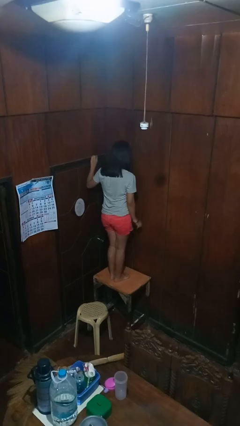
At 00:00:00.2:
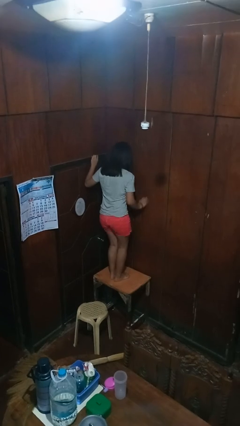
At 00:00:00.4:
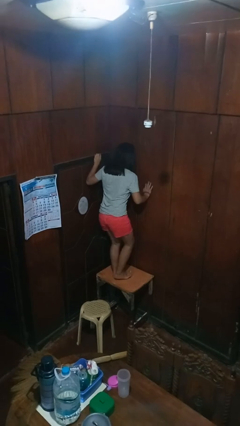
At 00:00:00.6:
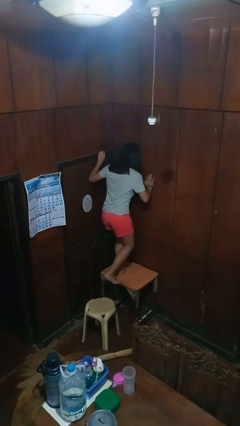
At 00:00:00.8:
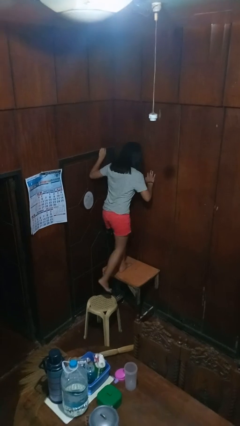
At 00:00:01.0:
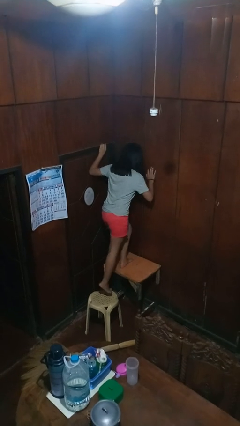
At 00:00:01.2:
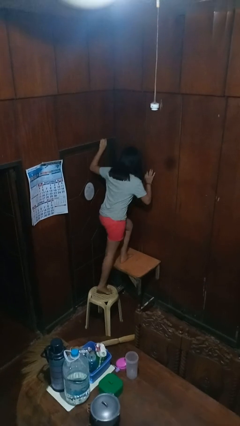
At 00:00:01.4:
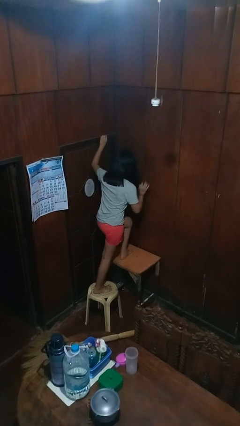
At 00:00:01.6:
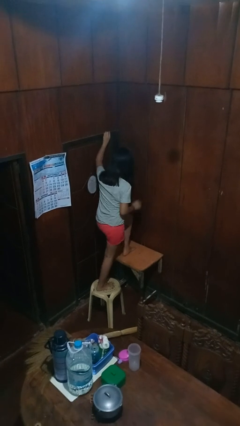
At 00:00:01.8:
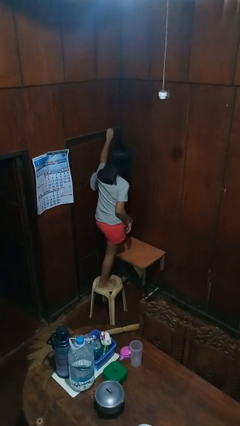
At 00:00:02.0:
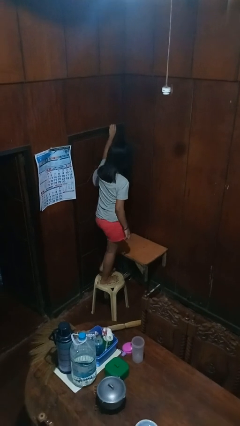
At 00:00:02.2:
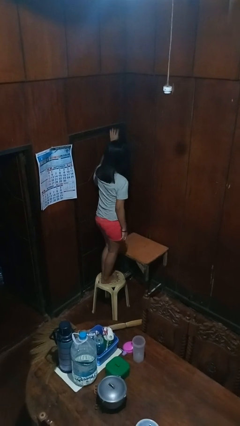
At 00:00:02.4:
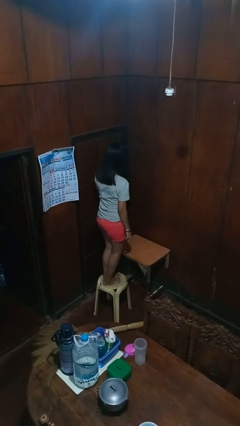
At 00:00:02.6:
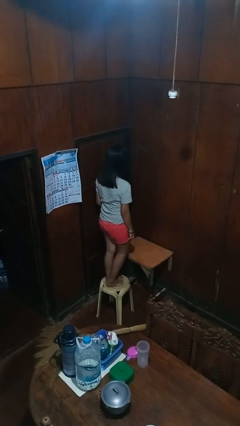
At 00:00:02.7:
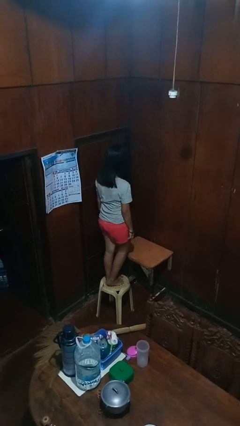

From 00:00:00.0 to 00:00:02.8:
person climbs off table

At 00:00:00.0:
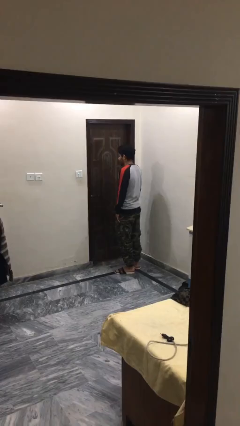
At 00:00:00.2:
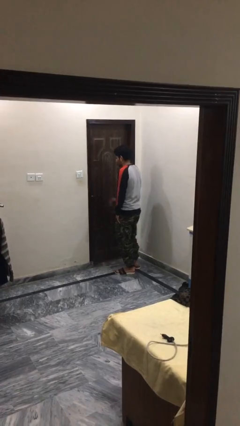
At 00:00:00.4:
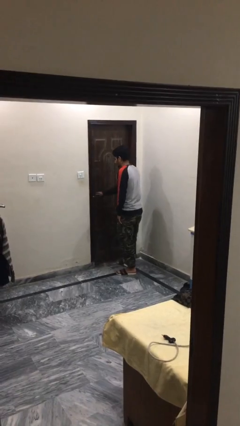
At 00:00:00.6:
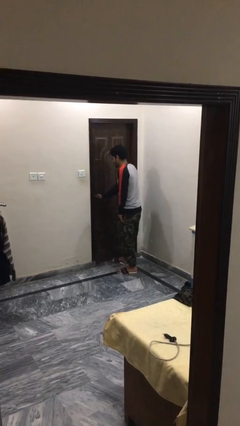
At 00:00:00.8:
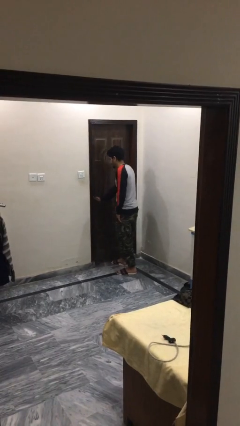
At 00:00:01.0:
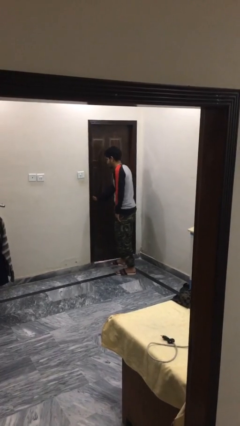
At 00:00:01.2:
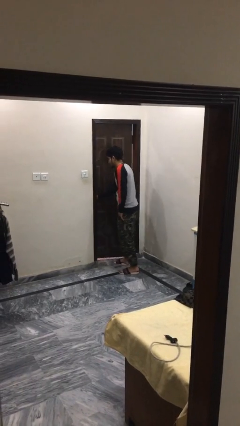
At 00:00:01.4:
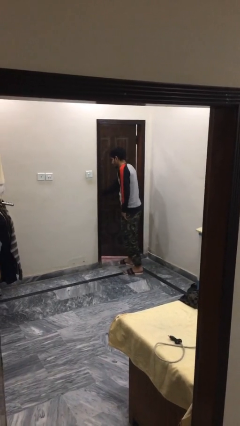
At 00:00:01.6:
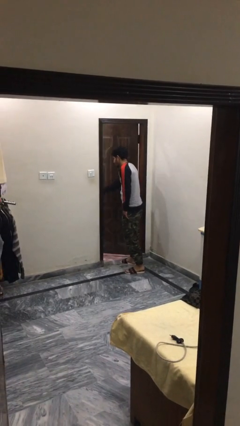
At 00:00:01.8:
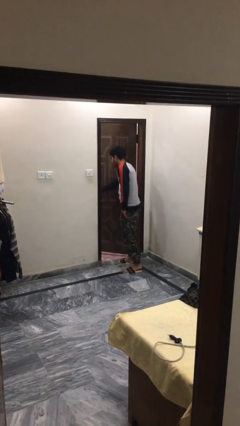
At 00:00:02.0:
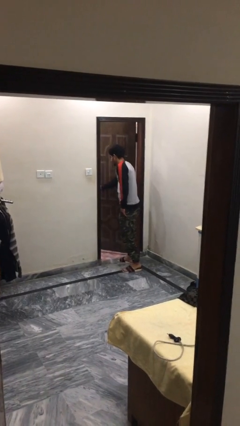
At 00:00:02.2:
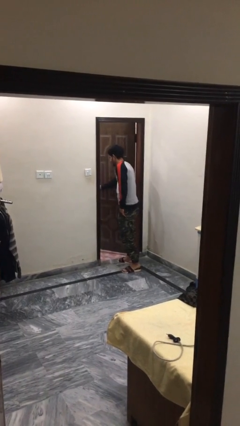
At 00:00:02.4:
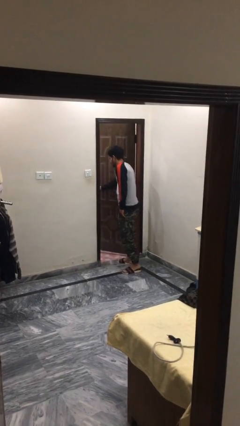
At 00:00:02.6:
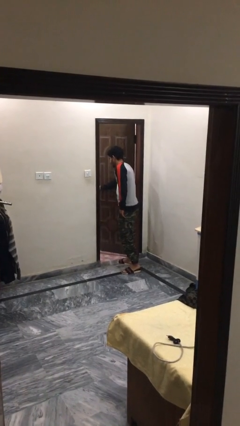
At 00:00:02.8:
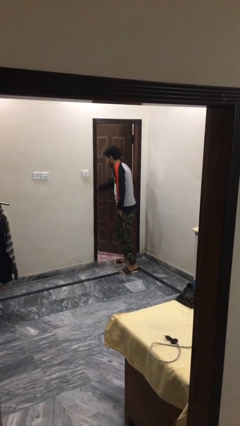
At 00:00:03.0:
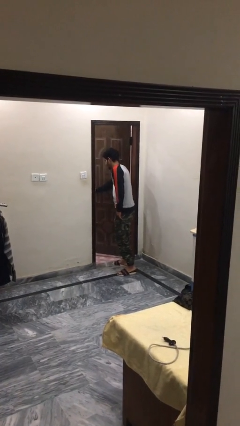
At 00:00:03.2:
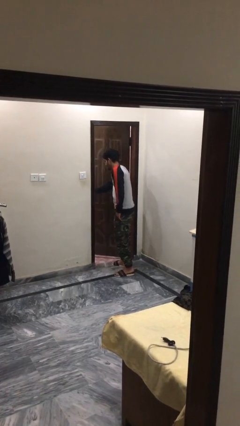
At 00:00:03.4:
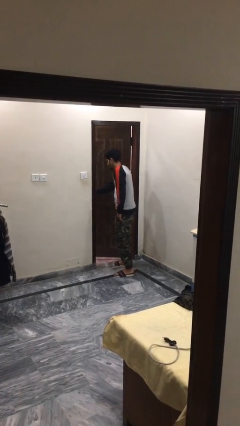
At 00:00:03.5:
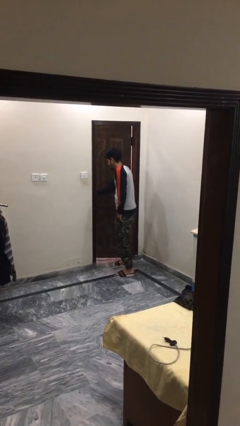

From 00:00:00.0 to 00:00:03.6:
person opens facility door

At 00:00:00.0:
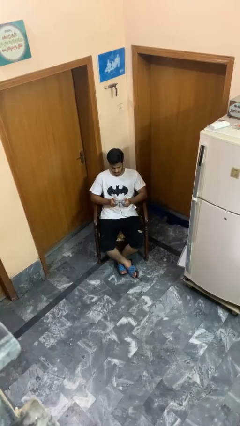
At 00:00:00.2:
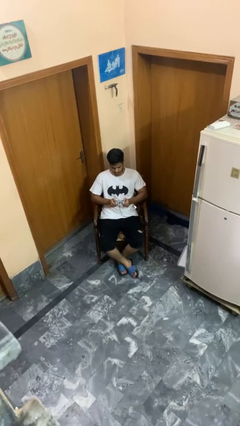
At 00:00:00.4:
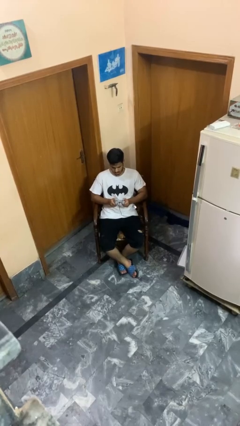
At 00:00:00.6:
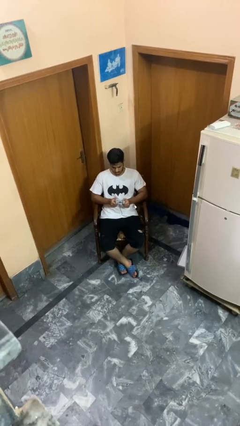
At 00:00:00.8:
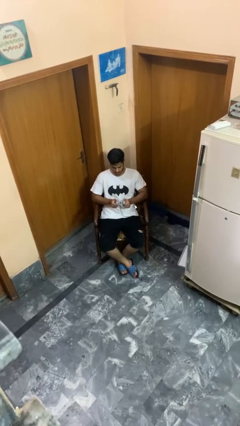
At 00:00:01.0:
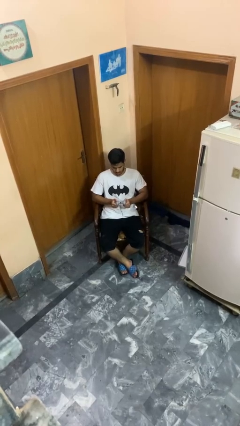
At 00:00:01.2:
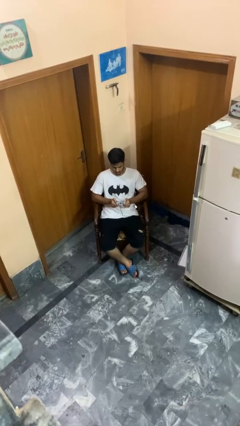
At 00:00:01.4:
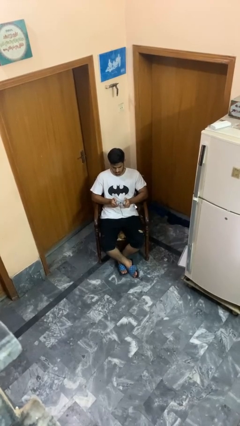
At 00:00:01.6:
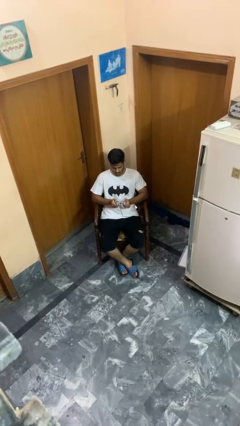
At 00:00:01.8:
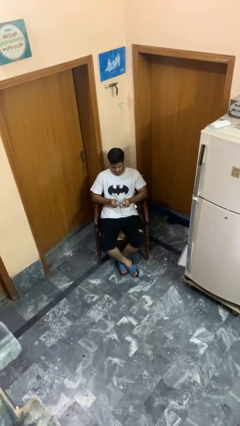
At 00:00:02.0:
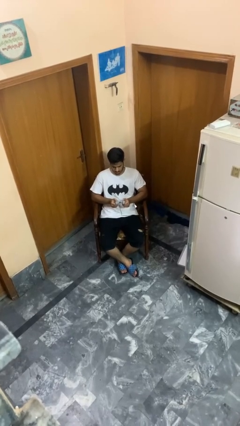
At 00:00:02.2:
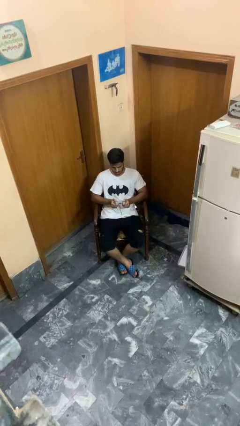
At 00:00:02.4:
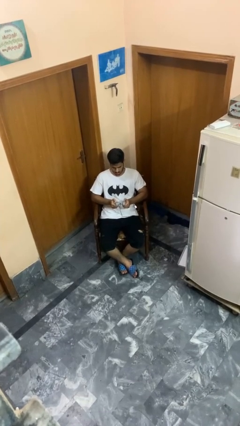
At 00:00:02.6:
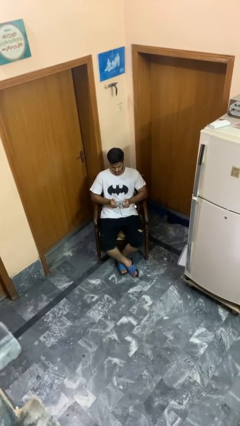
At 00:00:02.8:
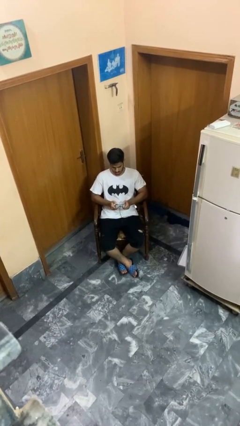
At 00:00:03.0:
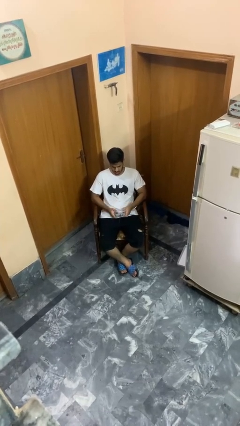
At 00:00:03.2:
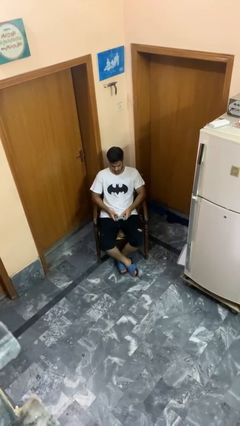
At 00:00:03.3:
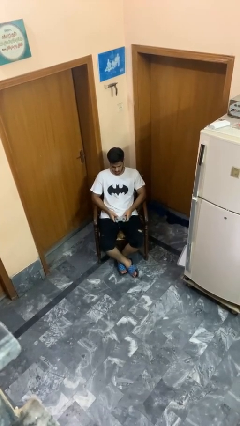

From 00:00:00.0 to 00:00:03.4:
person interacts with handheld game

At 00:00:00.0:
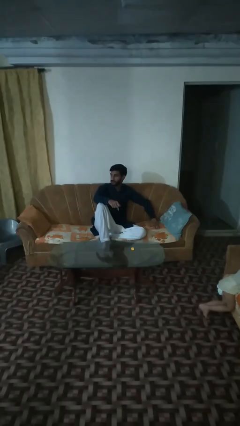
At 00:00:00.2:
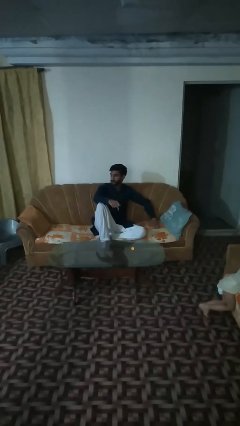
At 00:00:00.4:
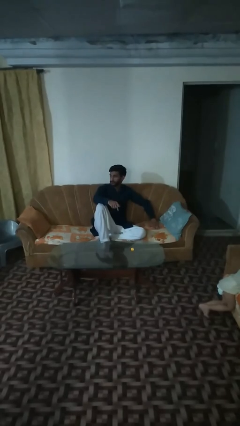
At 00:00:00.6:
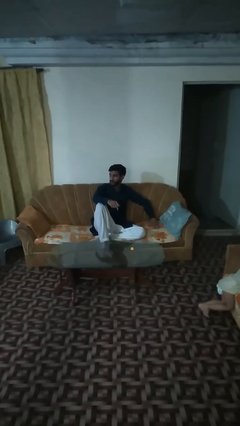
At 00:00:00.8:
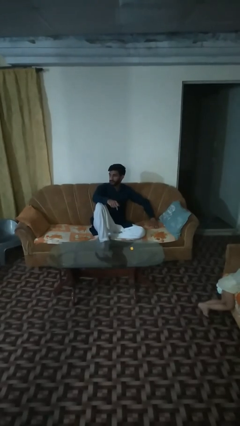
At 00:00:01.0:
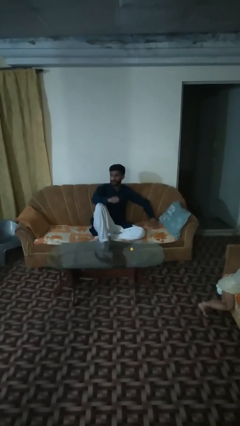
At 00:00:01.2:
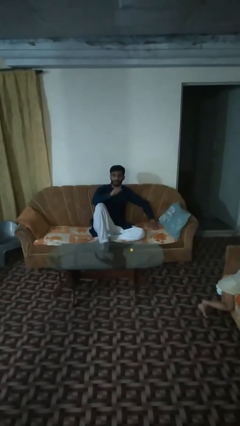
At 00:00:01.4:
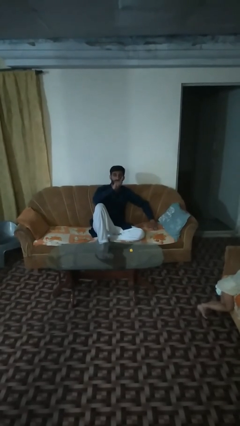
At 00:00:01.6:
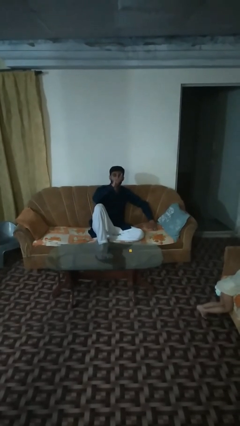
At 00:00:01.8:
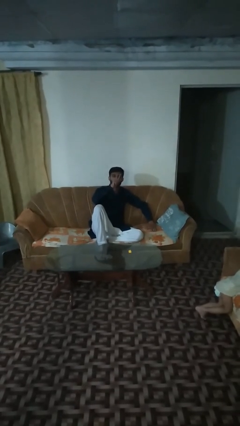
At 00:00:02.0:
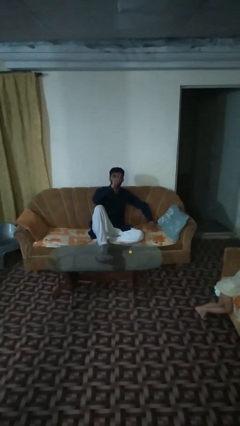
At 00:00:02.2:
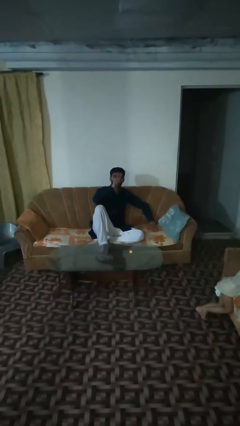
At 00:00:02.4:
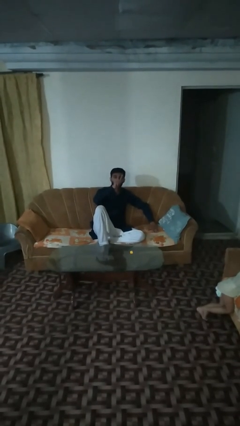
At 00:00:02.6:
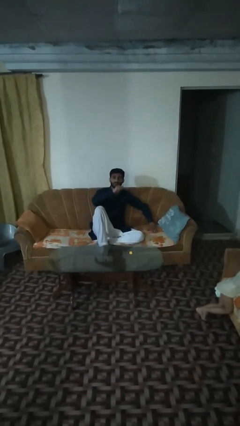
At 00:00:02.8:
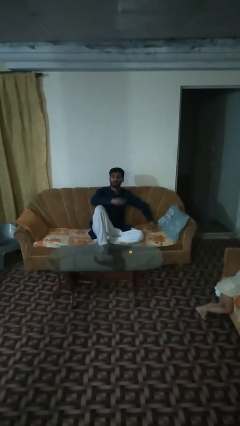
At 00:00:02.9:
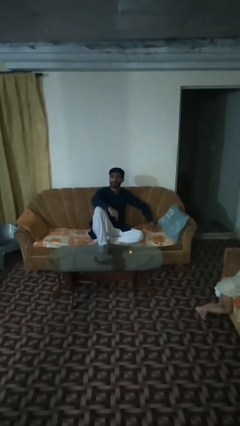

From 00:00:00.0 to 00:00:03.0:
person vapes

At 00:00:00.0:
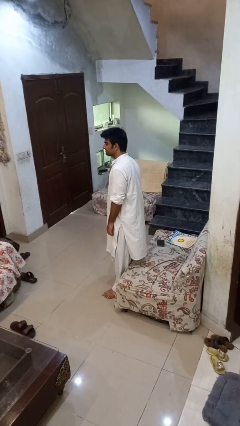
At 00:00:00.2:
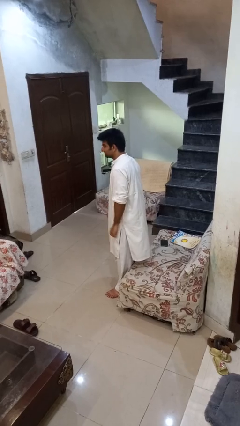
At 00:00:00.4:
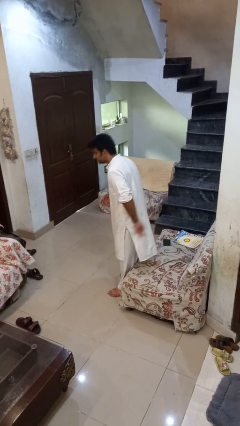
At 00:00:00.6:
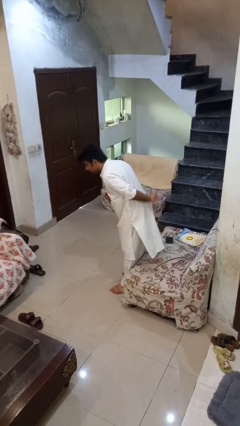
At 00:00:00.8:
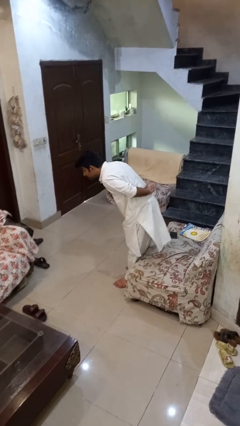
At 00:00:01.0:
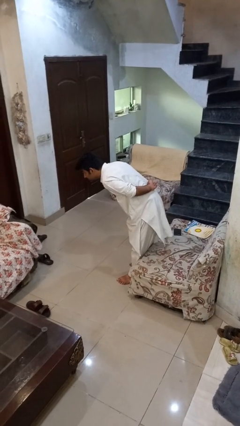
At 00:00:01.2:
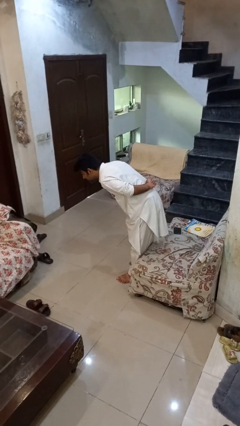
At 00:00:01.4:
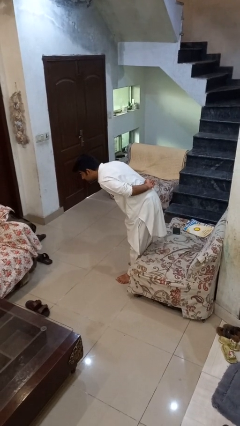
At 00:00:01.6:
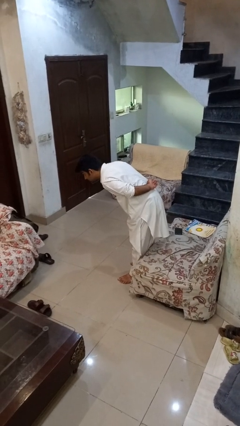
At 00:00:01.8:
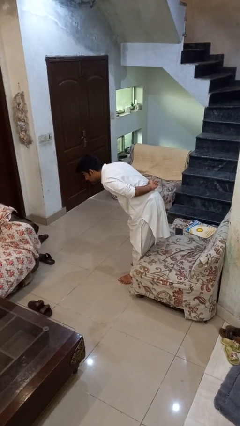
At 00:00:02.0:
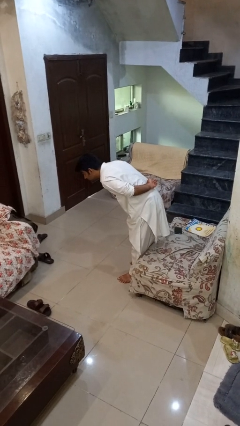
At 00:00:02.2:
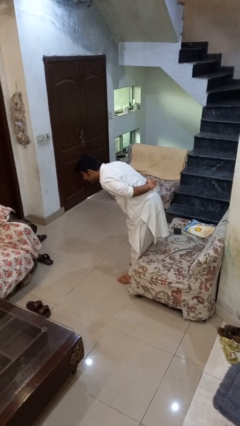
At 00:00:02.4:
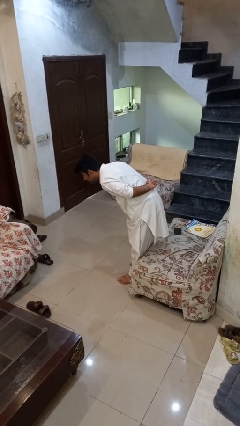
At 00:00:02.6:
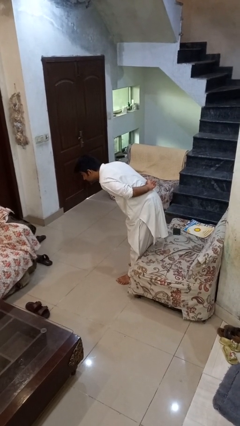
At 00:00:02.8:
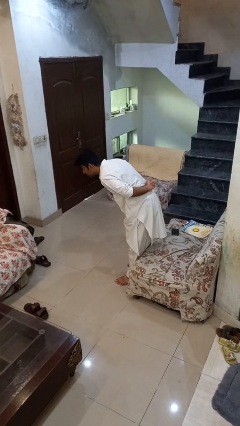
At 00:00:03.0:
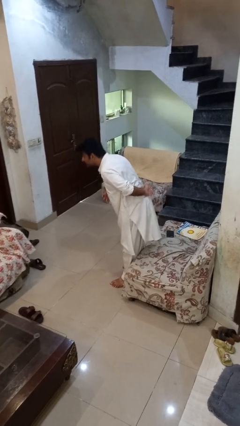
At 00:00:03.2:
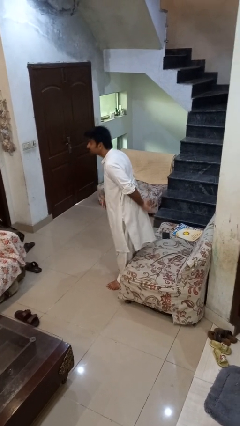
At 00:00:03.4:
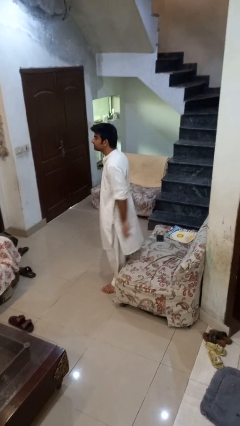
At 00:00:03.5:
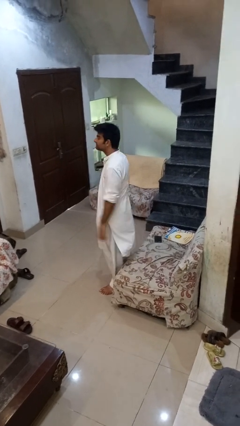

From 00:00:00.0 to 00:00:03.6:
person bows

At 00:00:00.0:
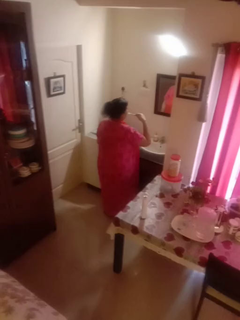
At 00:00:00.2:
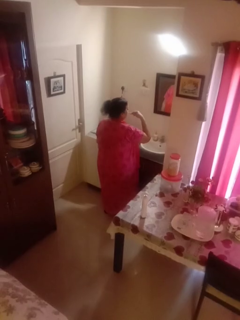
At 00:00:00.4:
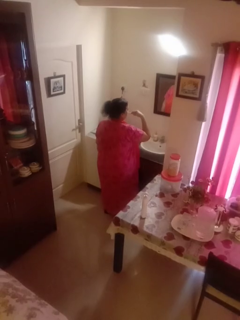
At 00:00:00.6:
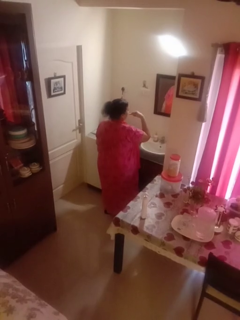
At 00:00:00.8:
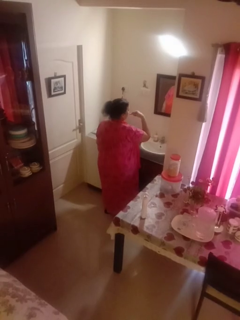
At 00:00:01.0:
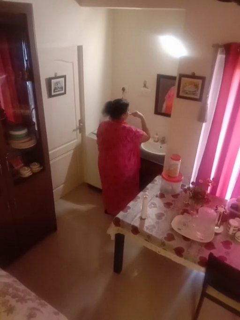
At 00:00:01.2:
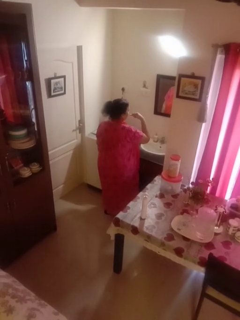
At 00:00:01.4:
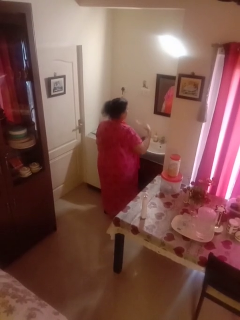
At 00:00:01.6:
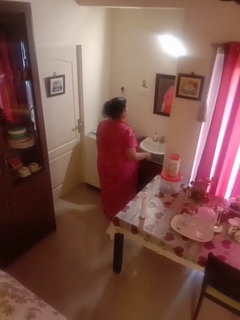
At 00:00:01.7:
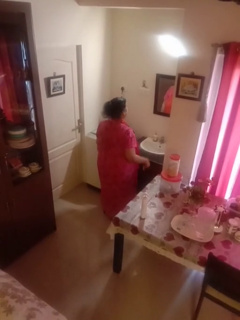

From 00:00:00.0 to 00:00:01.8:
person brushes teeth
